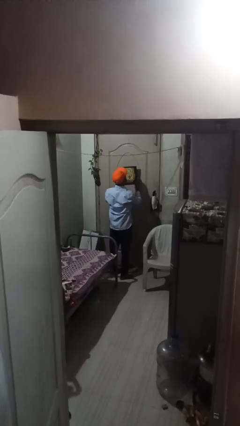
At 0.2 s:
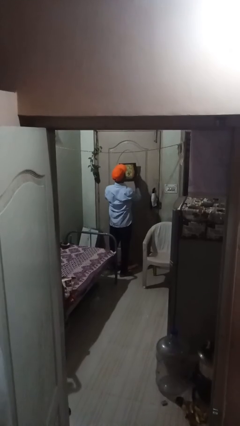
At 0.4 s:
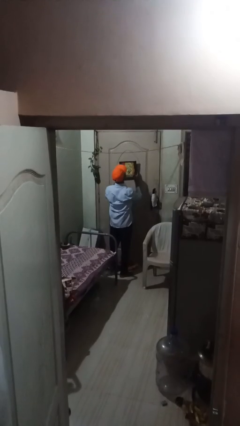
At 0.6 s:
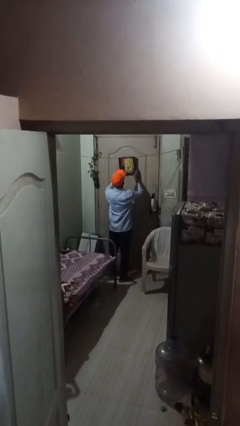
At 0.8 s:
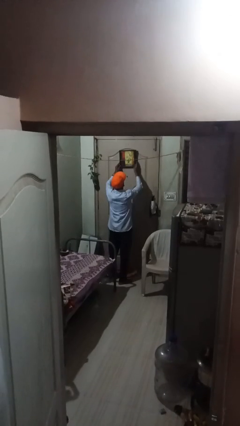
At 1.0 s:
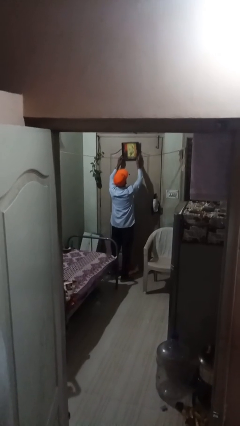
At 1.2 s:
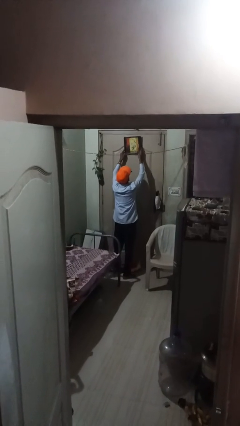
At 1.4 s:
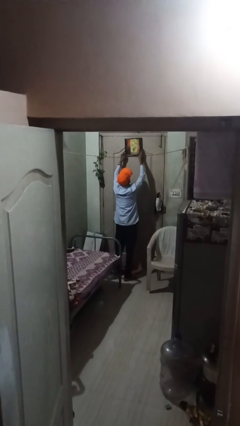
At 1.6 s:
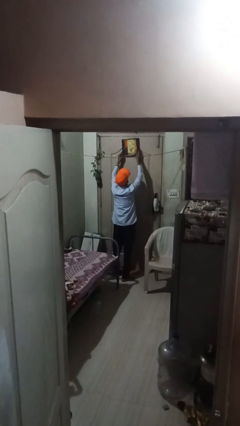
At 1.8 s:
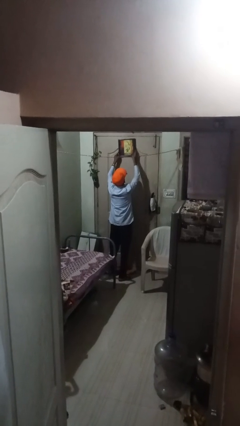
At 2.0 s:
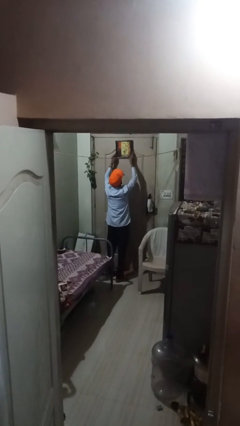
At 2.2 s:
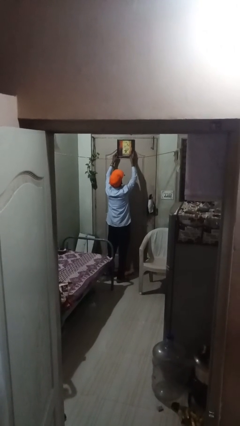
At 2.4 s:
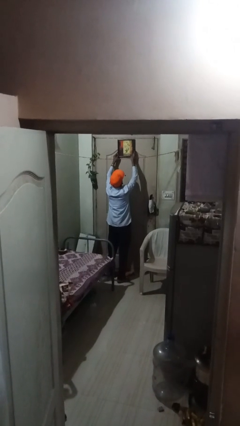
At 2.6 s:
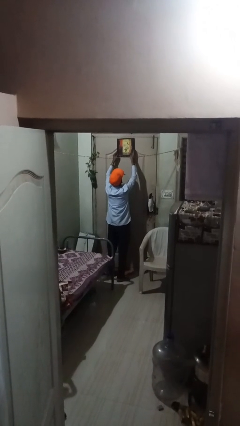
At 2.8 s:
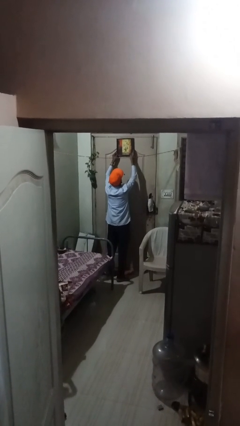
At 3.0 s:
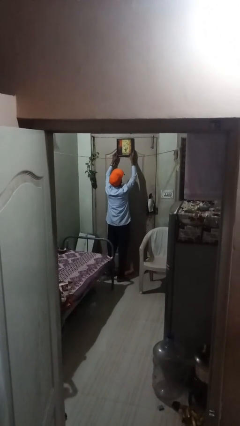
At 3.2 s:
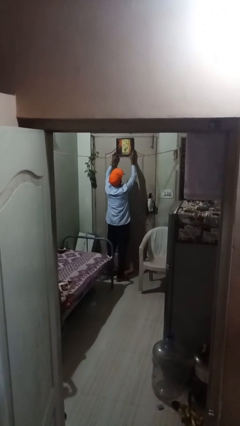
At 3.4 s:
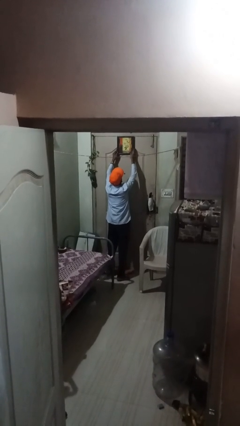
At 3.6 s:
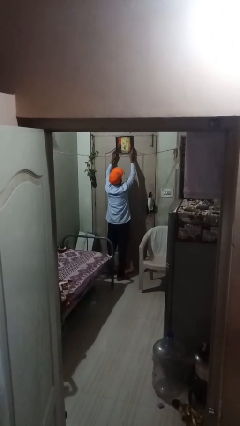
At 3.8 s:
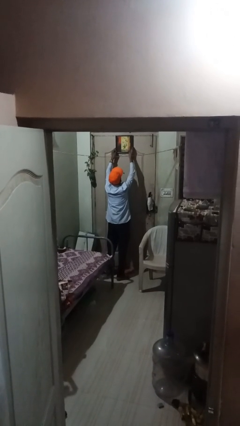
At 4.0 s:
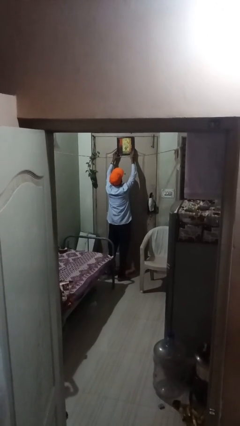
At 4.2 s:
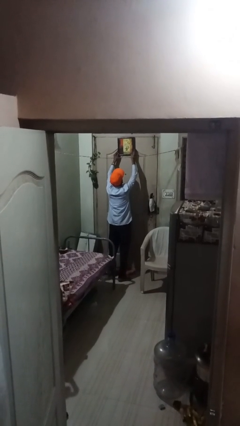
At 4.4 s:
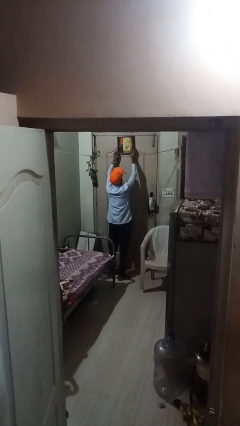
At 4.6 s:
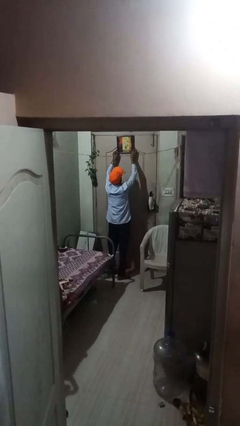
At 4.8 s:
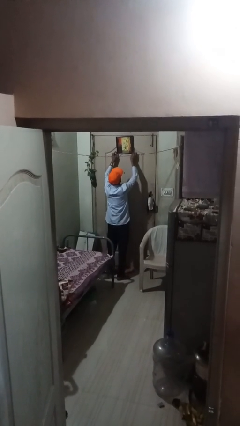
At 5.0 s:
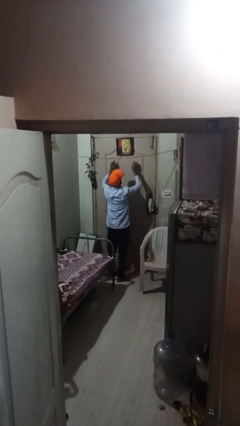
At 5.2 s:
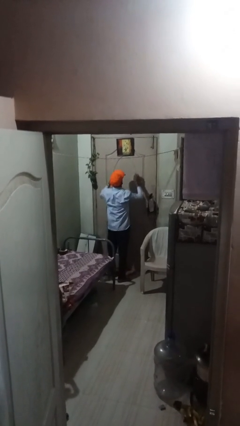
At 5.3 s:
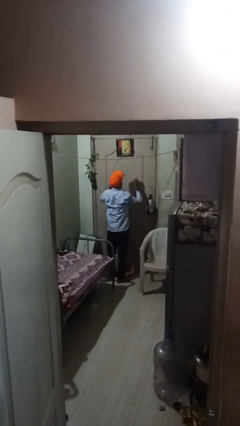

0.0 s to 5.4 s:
person puts up picture frame

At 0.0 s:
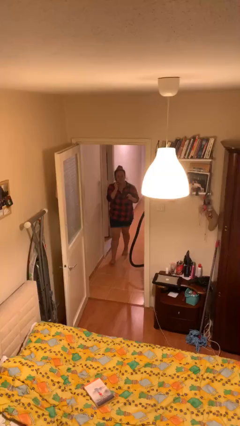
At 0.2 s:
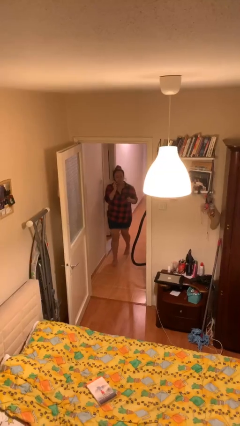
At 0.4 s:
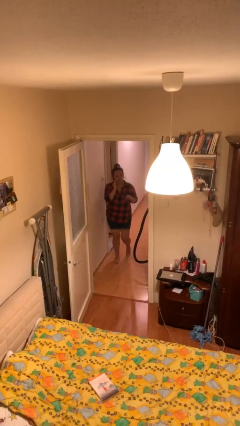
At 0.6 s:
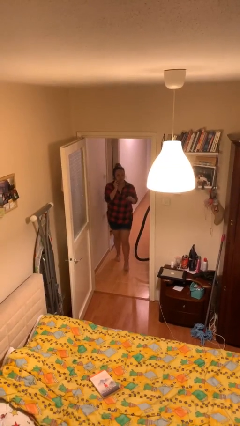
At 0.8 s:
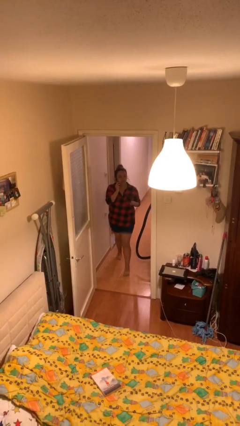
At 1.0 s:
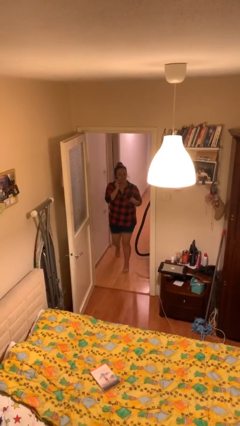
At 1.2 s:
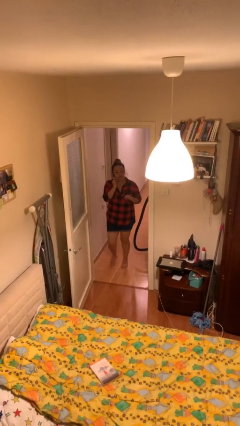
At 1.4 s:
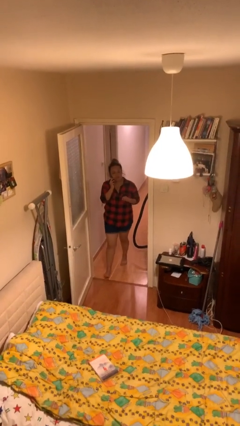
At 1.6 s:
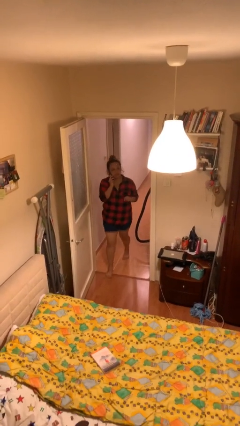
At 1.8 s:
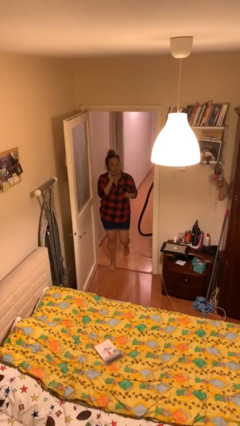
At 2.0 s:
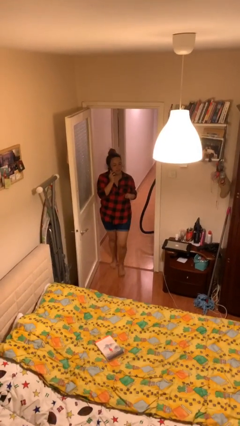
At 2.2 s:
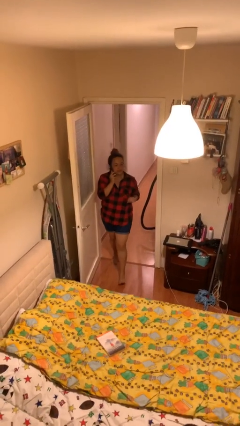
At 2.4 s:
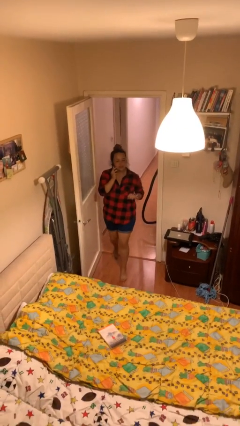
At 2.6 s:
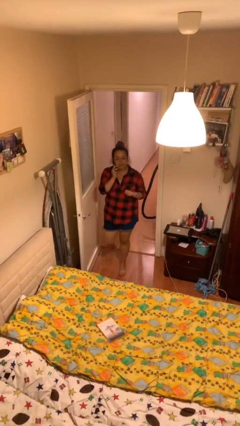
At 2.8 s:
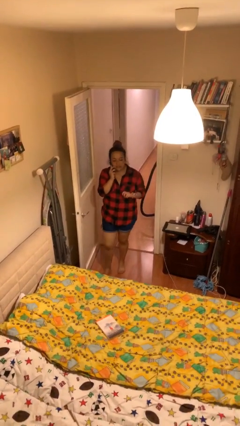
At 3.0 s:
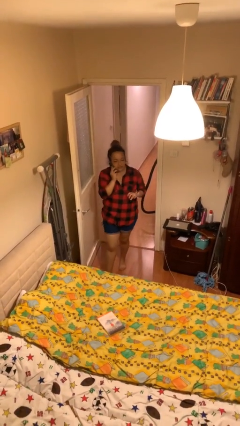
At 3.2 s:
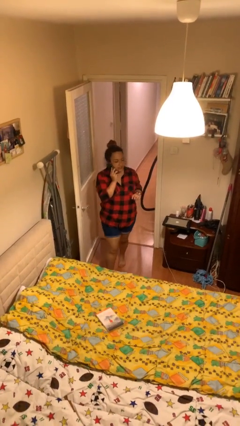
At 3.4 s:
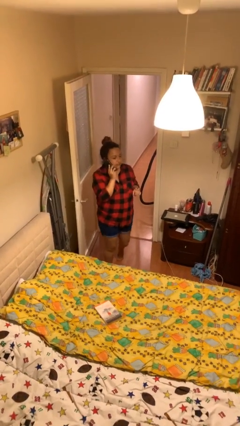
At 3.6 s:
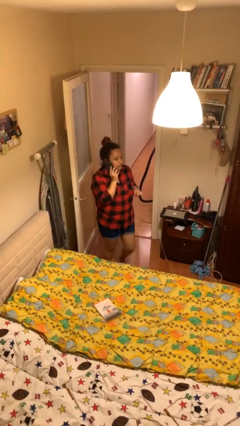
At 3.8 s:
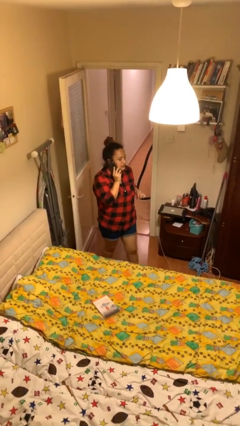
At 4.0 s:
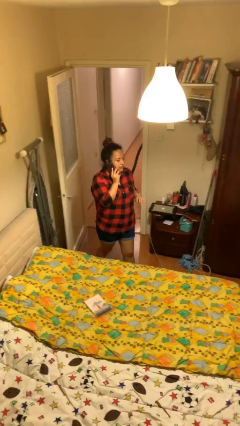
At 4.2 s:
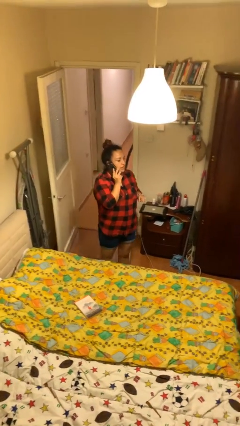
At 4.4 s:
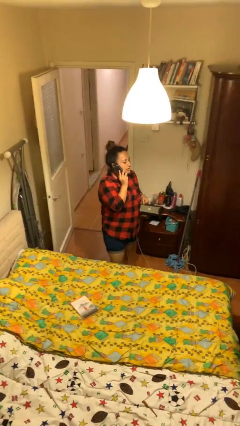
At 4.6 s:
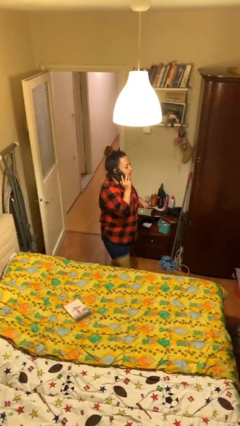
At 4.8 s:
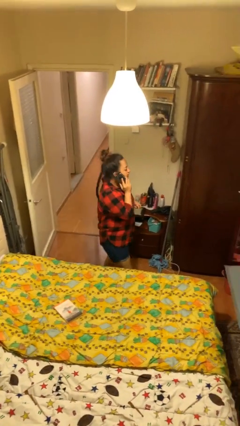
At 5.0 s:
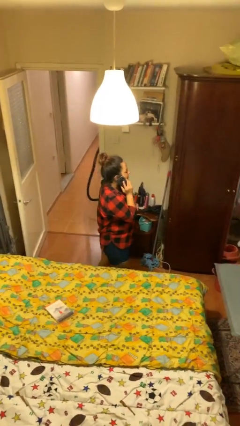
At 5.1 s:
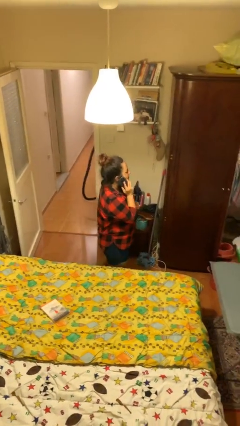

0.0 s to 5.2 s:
person enters scene through structure

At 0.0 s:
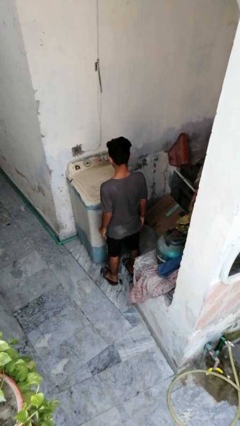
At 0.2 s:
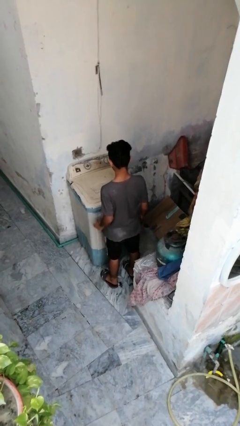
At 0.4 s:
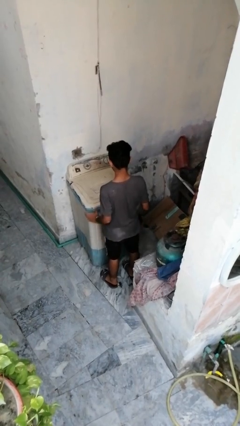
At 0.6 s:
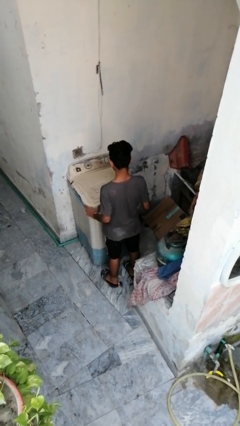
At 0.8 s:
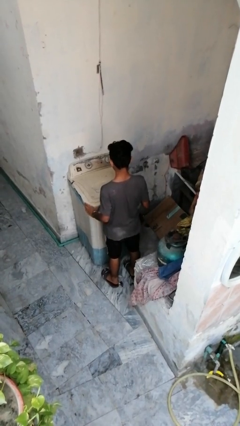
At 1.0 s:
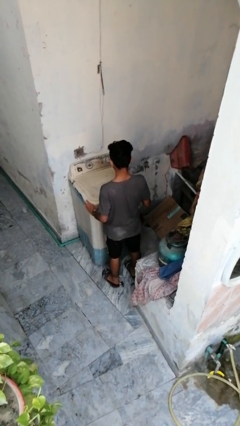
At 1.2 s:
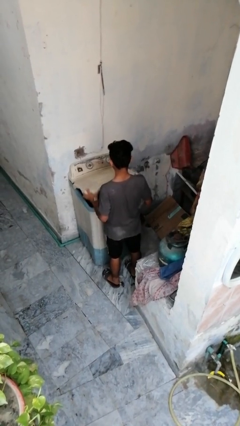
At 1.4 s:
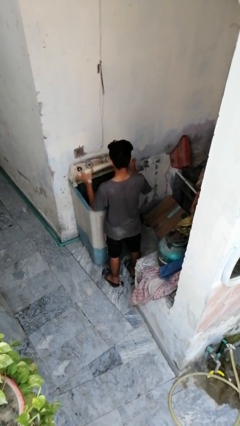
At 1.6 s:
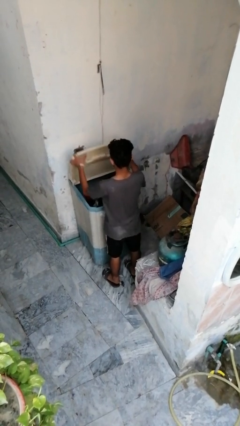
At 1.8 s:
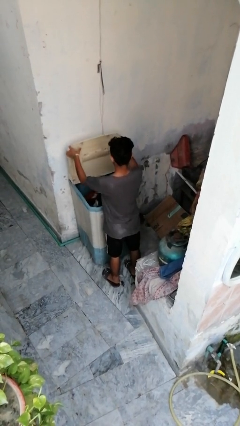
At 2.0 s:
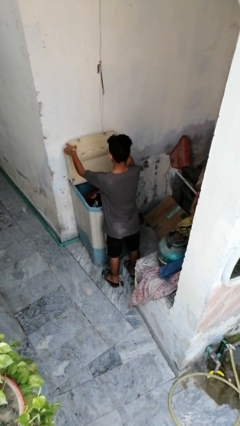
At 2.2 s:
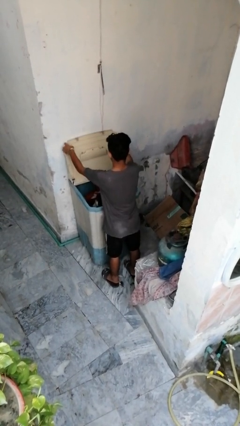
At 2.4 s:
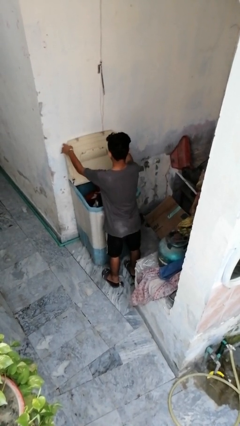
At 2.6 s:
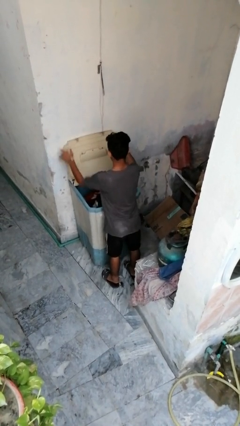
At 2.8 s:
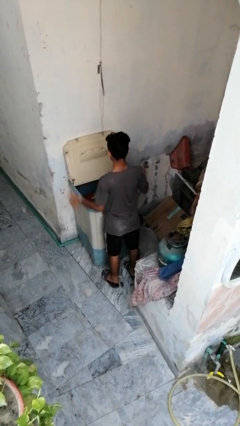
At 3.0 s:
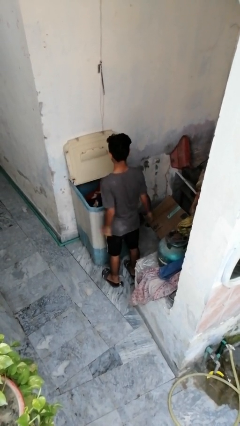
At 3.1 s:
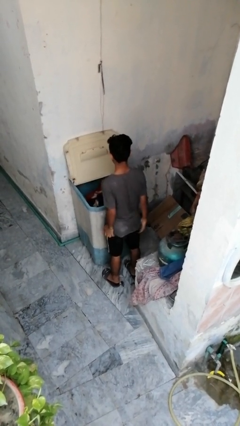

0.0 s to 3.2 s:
person opens clothes washer

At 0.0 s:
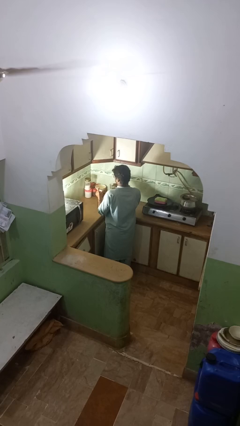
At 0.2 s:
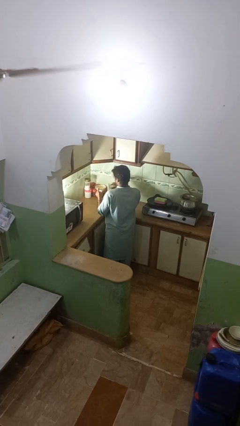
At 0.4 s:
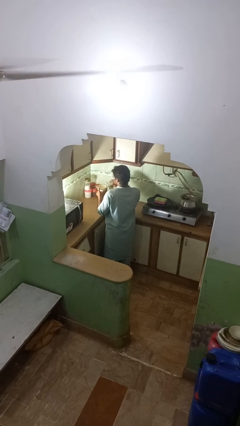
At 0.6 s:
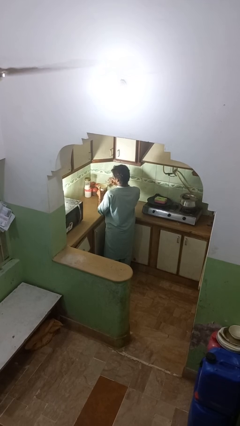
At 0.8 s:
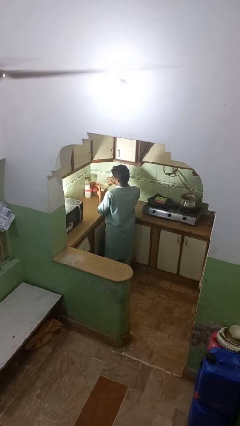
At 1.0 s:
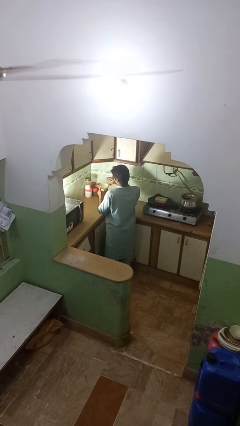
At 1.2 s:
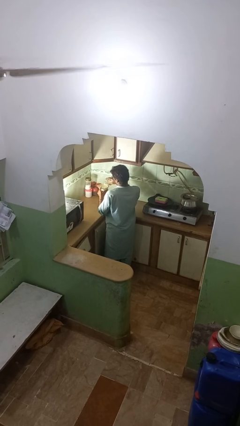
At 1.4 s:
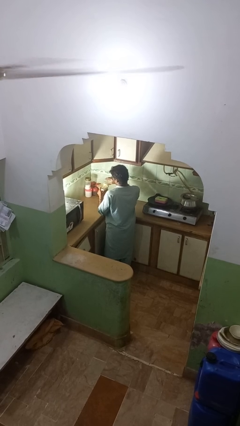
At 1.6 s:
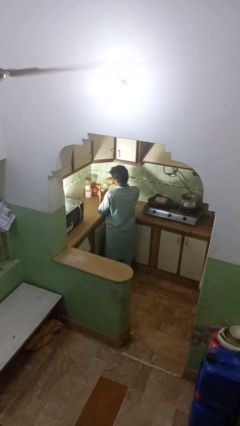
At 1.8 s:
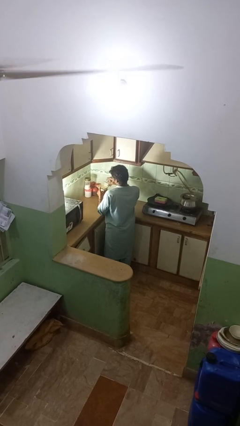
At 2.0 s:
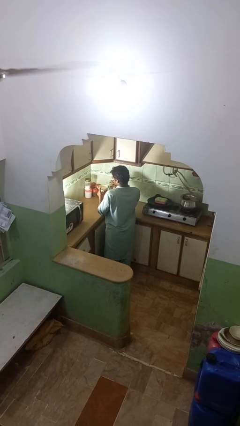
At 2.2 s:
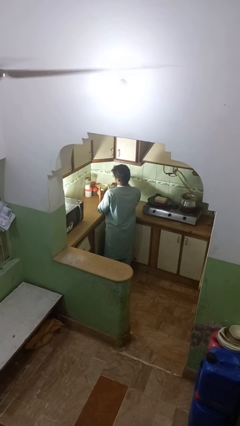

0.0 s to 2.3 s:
person pours into bowl

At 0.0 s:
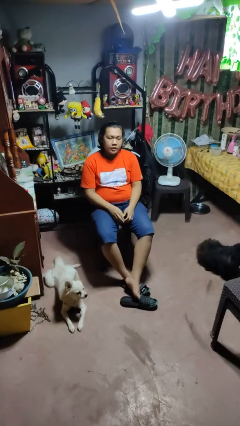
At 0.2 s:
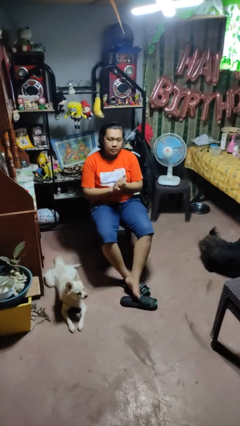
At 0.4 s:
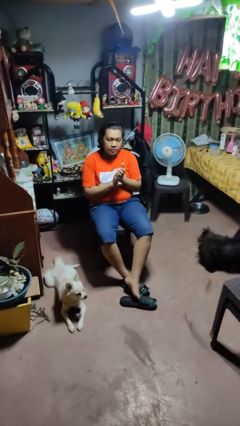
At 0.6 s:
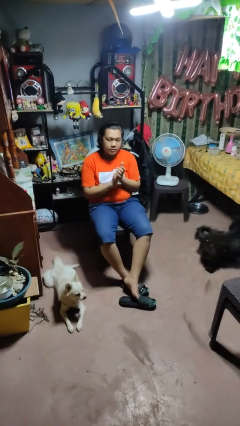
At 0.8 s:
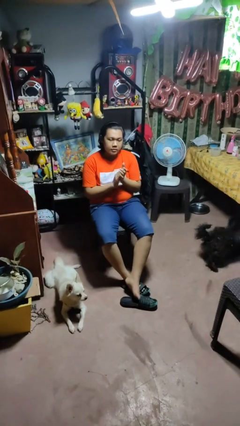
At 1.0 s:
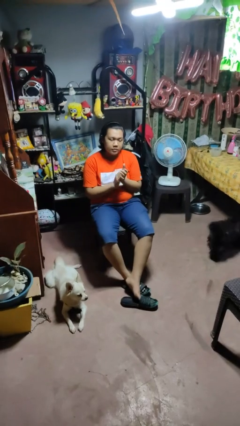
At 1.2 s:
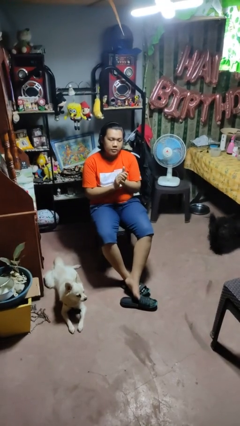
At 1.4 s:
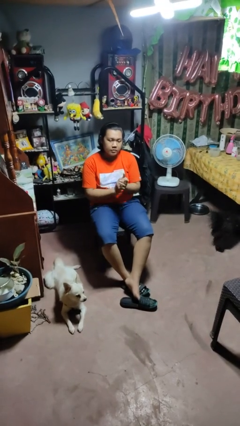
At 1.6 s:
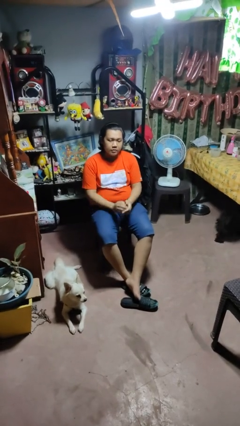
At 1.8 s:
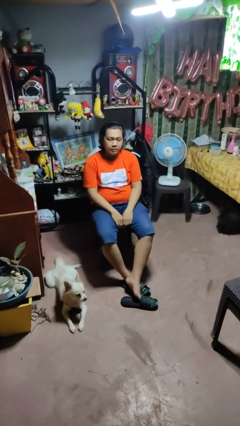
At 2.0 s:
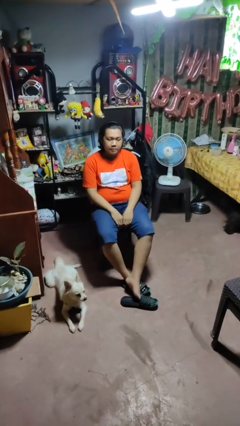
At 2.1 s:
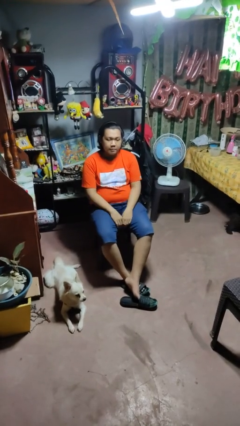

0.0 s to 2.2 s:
person claps hands
